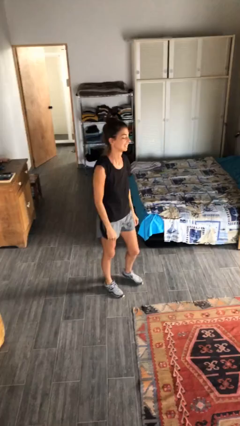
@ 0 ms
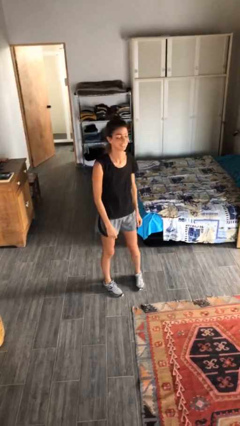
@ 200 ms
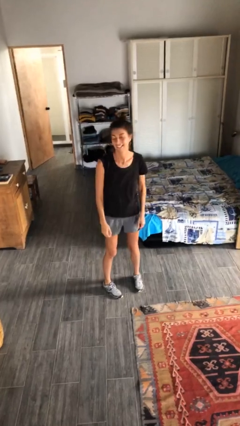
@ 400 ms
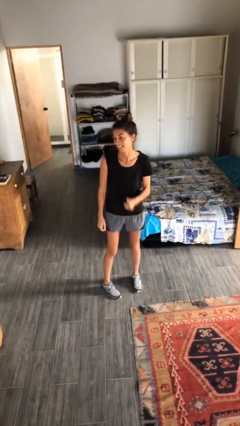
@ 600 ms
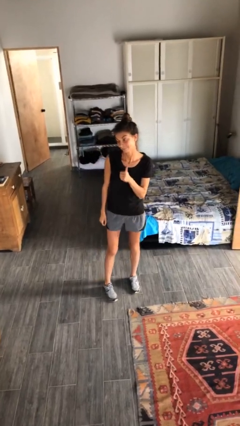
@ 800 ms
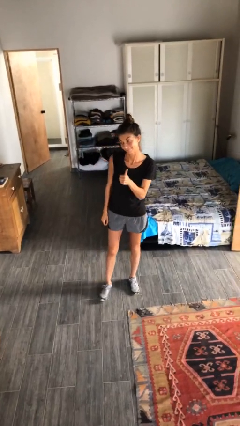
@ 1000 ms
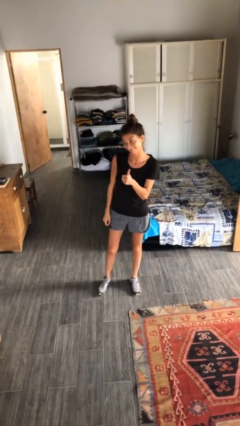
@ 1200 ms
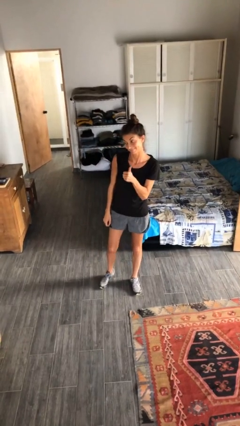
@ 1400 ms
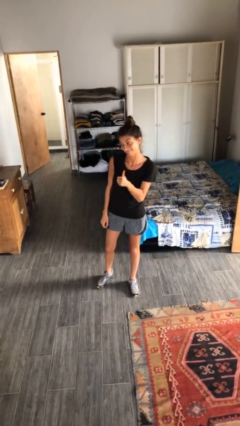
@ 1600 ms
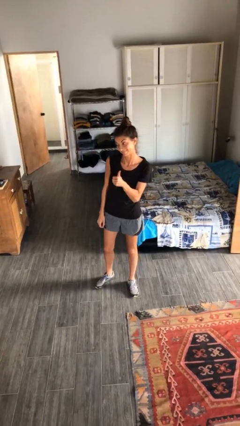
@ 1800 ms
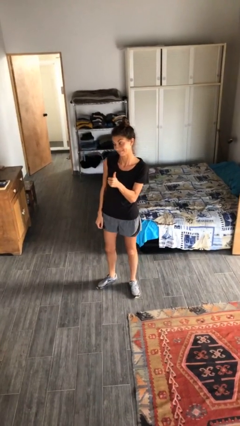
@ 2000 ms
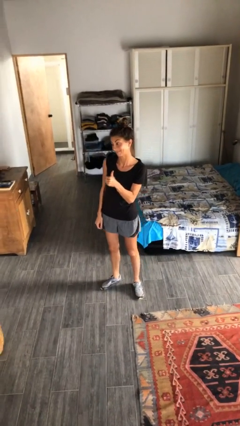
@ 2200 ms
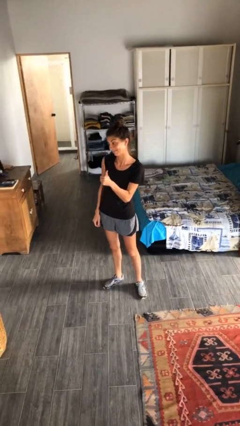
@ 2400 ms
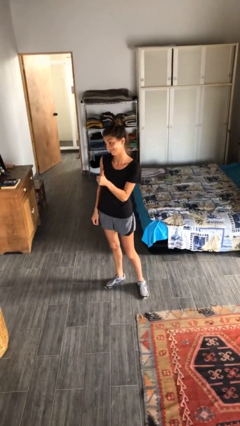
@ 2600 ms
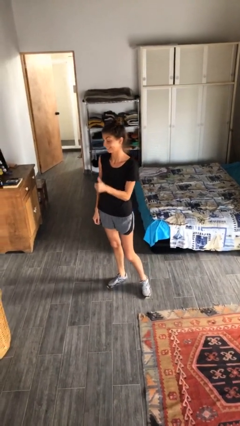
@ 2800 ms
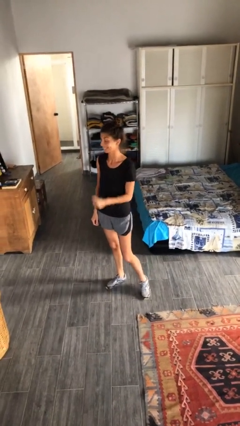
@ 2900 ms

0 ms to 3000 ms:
person gestures thumbs up

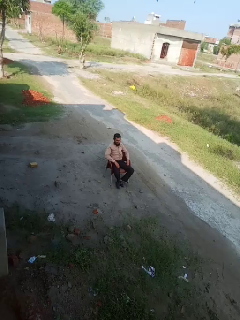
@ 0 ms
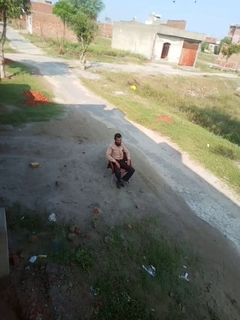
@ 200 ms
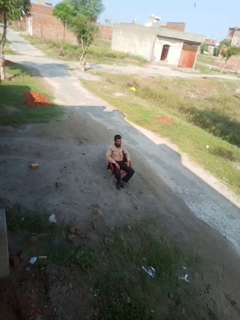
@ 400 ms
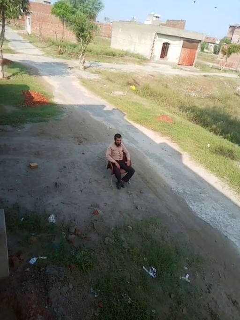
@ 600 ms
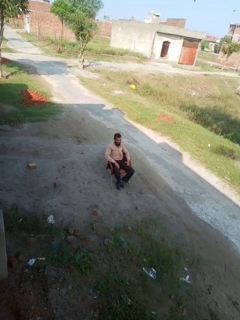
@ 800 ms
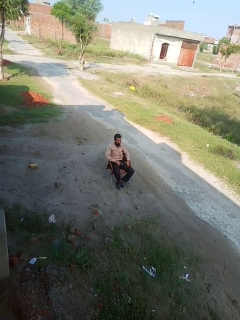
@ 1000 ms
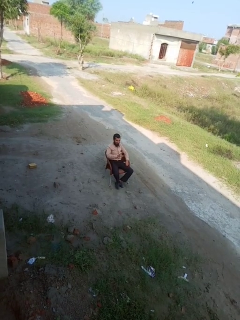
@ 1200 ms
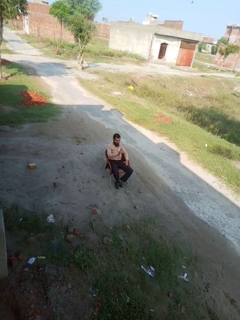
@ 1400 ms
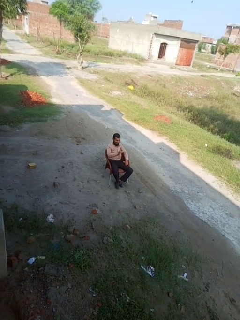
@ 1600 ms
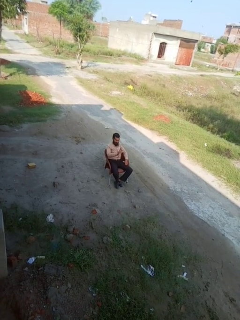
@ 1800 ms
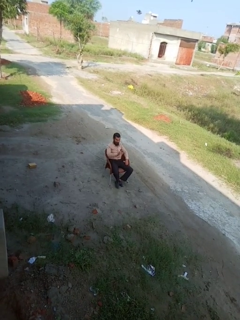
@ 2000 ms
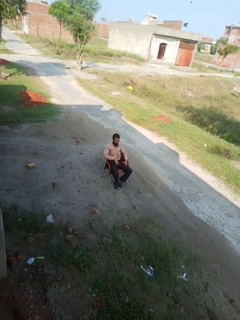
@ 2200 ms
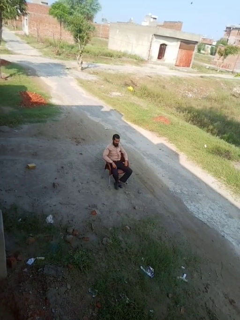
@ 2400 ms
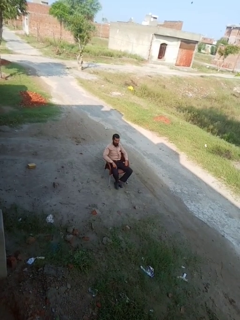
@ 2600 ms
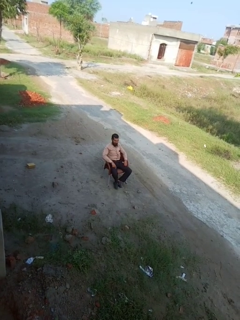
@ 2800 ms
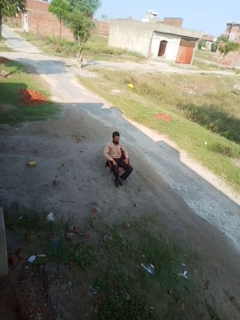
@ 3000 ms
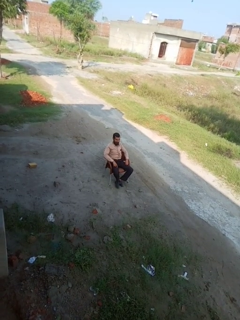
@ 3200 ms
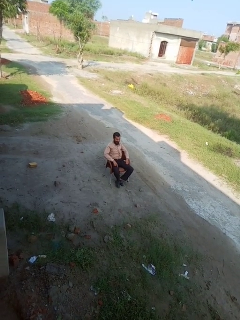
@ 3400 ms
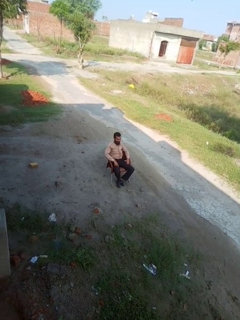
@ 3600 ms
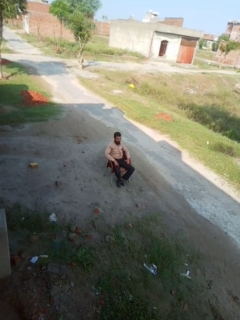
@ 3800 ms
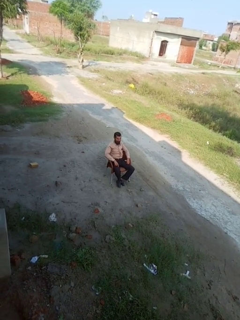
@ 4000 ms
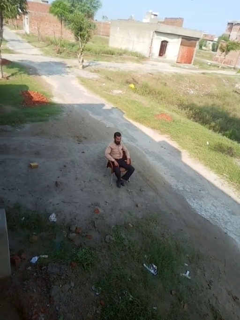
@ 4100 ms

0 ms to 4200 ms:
person gestures number one

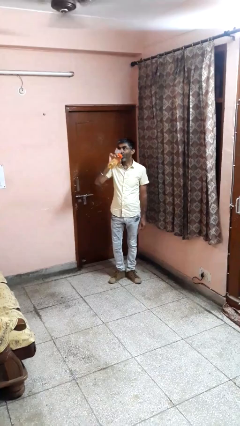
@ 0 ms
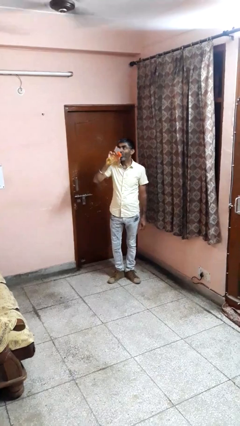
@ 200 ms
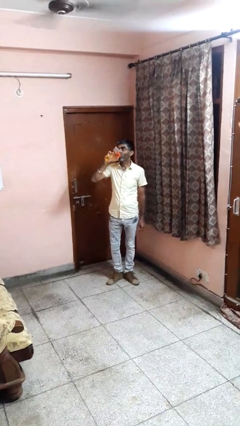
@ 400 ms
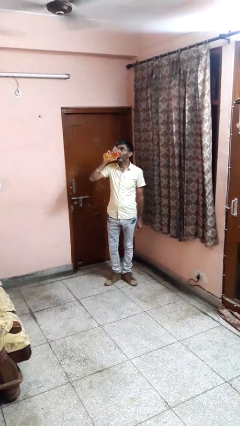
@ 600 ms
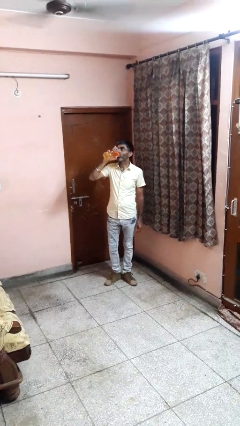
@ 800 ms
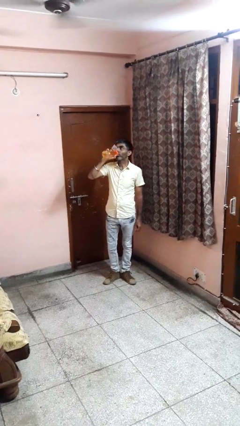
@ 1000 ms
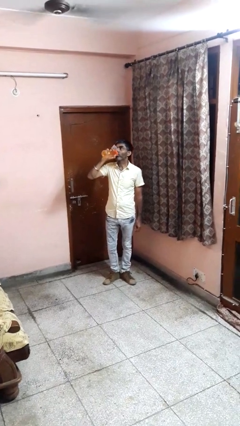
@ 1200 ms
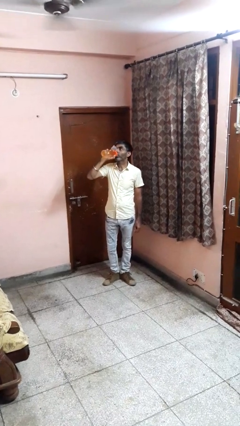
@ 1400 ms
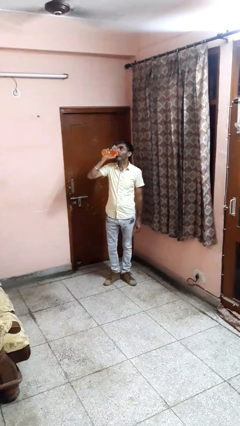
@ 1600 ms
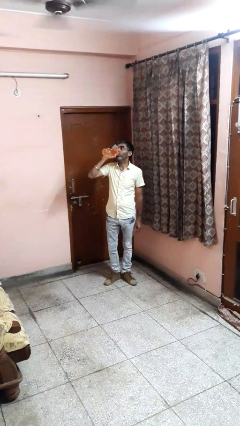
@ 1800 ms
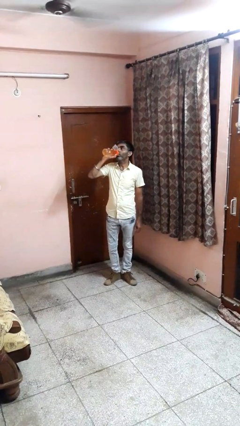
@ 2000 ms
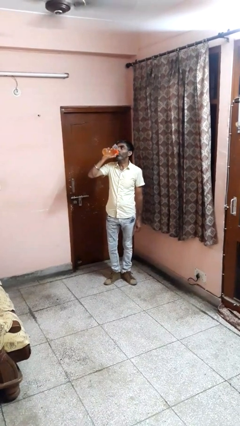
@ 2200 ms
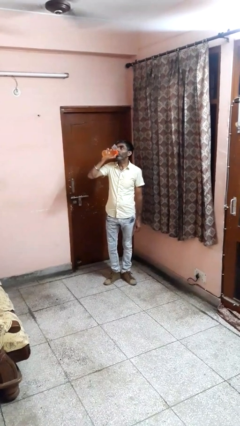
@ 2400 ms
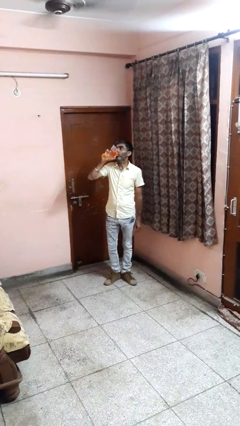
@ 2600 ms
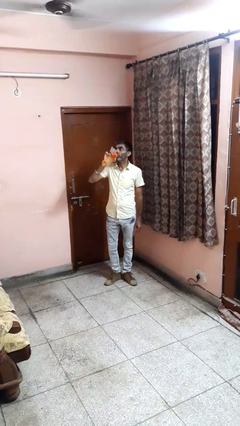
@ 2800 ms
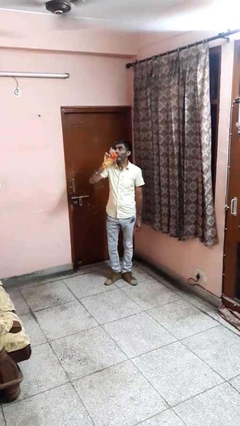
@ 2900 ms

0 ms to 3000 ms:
person drinks from bottle

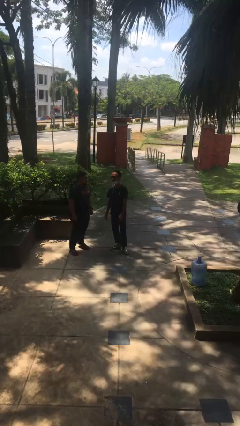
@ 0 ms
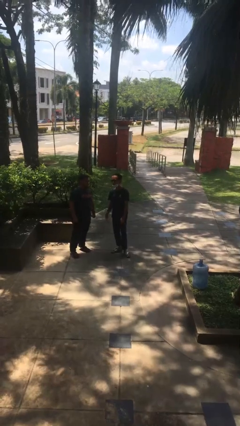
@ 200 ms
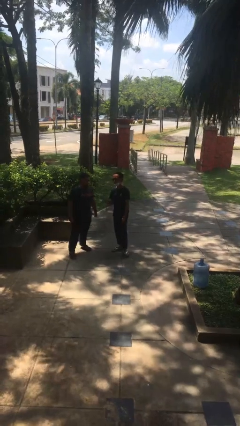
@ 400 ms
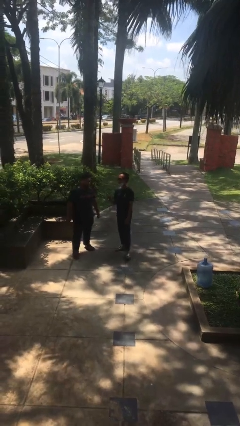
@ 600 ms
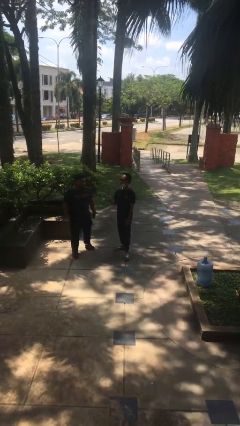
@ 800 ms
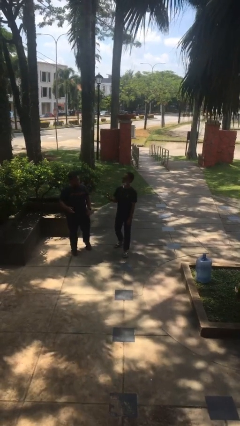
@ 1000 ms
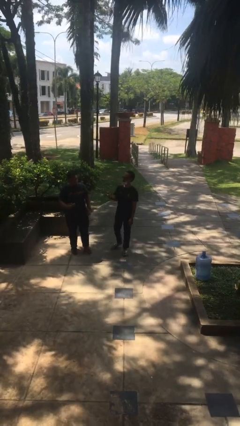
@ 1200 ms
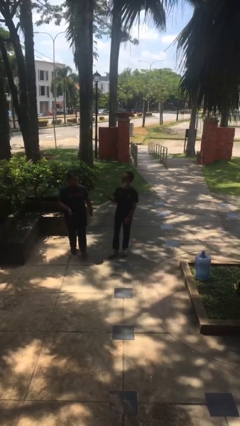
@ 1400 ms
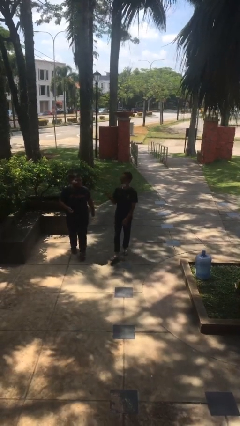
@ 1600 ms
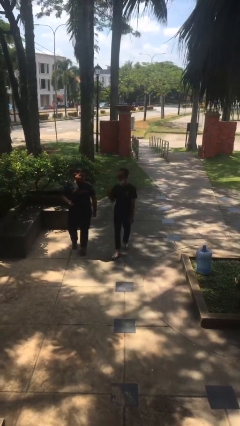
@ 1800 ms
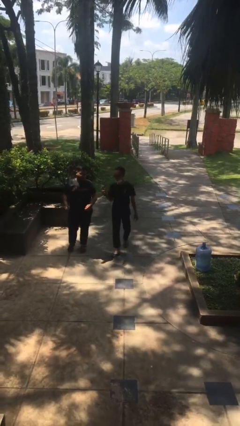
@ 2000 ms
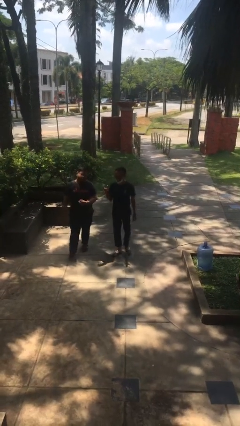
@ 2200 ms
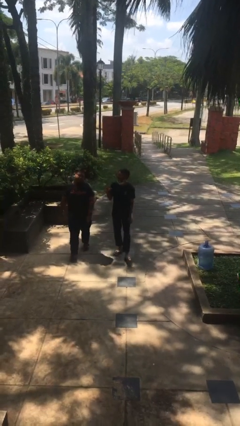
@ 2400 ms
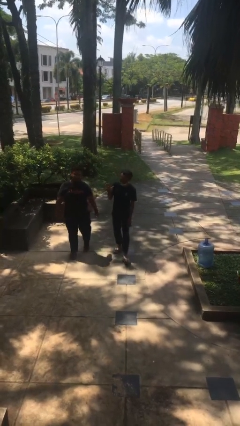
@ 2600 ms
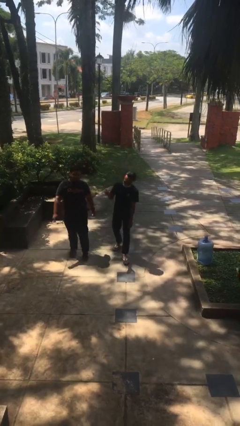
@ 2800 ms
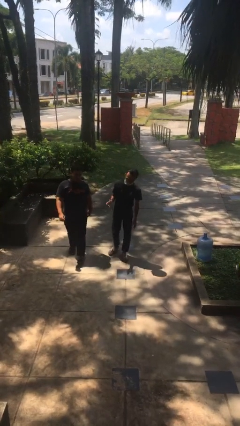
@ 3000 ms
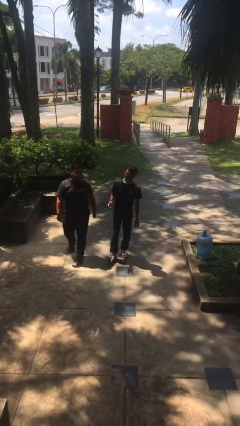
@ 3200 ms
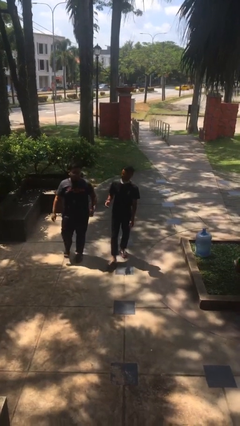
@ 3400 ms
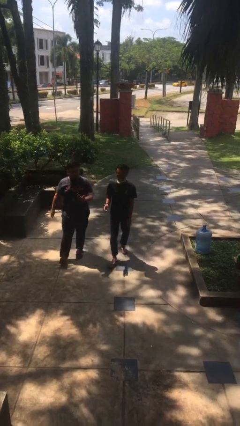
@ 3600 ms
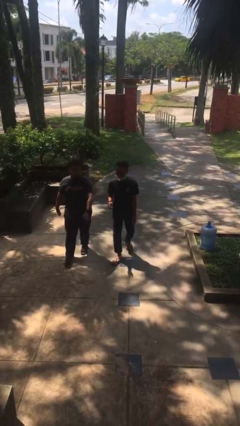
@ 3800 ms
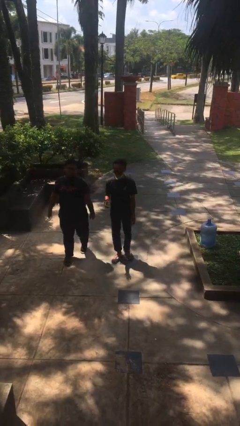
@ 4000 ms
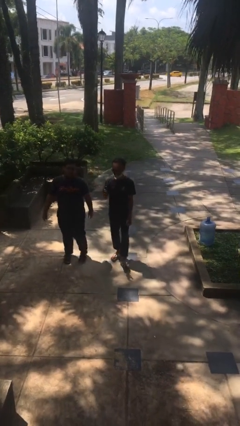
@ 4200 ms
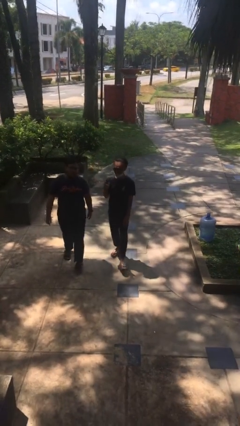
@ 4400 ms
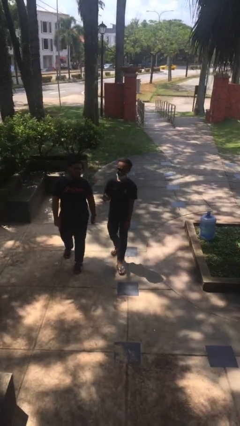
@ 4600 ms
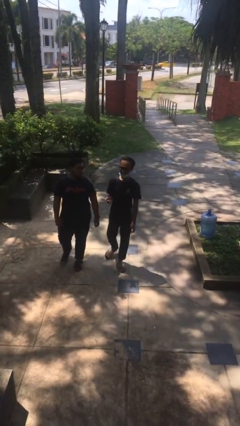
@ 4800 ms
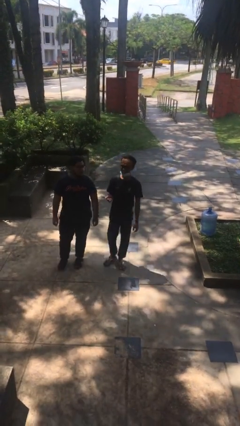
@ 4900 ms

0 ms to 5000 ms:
person talks to person

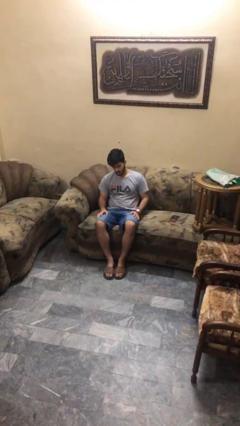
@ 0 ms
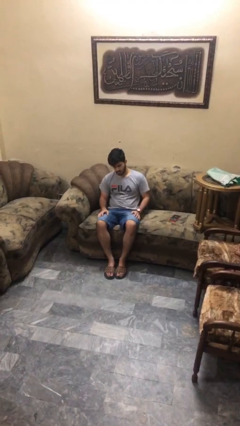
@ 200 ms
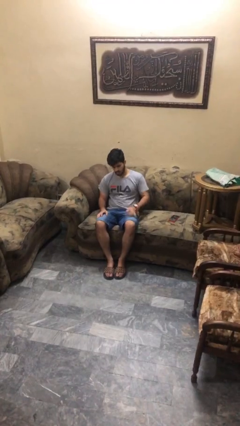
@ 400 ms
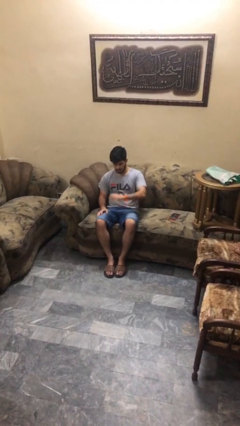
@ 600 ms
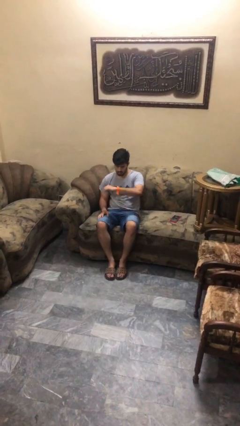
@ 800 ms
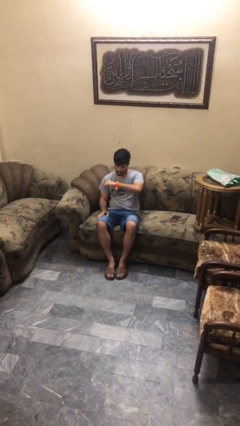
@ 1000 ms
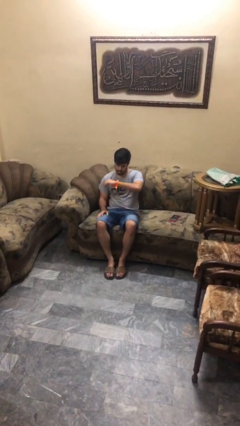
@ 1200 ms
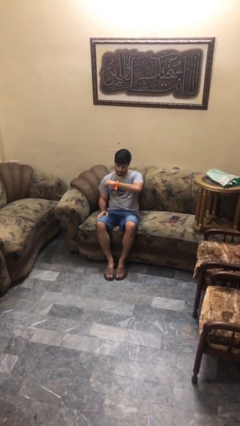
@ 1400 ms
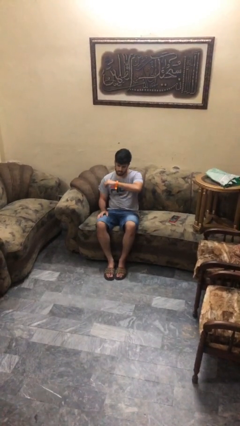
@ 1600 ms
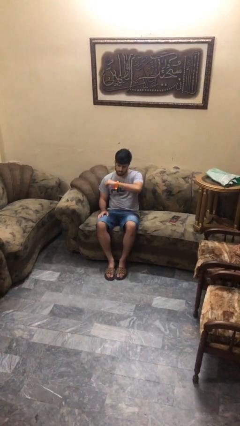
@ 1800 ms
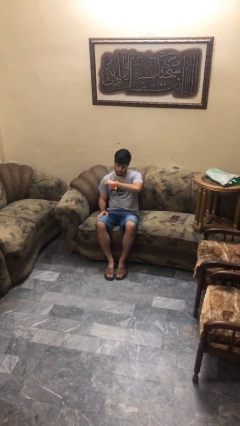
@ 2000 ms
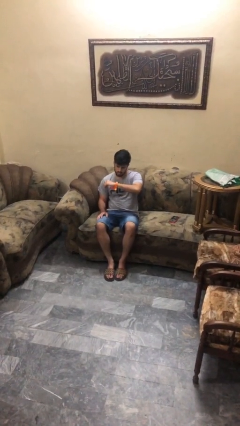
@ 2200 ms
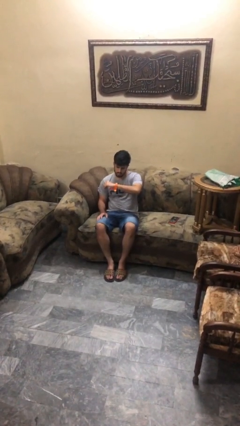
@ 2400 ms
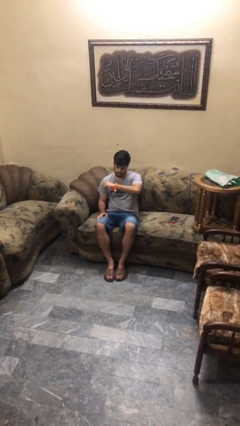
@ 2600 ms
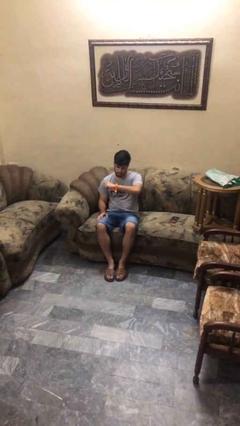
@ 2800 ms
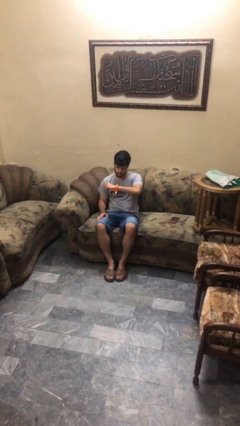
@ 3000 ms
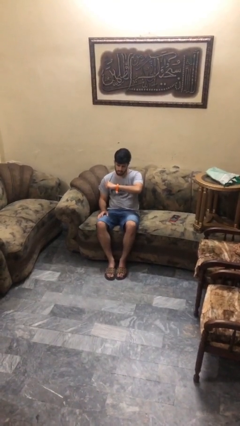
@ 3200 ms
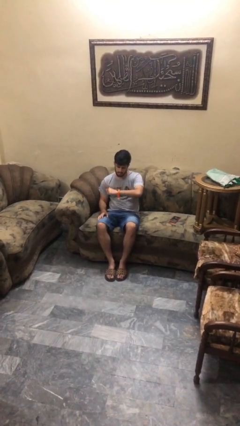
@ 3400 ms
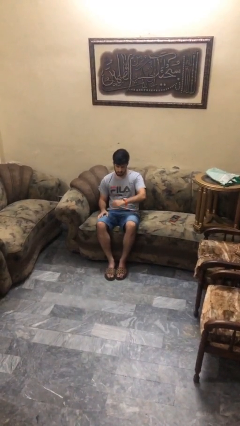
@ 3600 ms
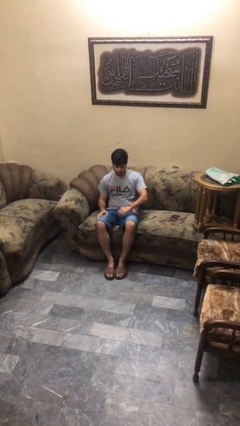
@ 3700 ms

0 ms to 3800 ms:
person looks at wristwatch
